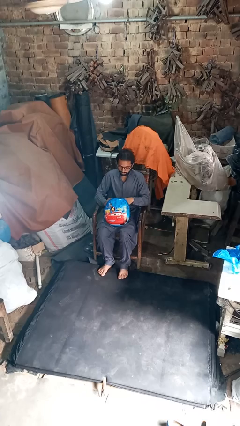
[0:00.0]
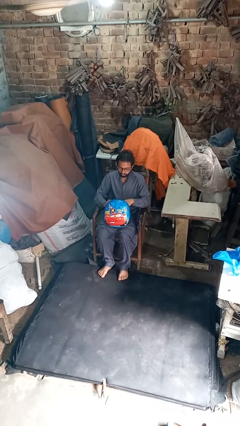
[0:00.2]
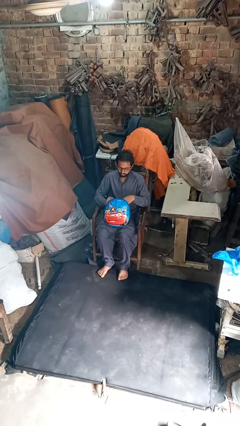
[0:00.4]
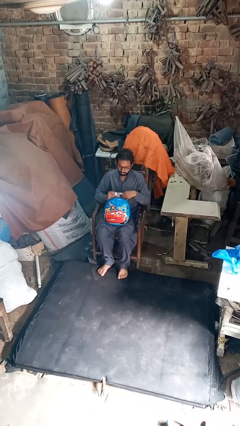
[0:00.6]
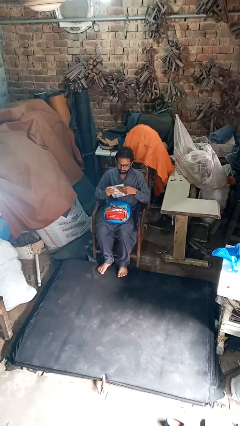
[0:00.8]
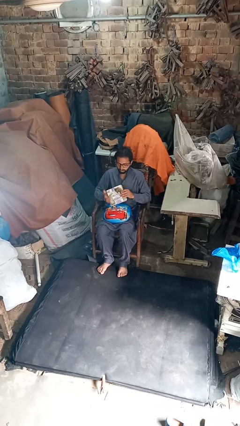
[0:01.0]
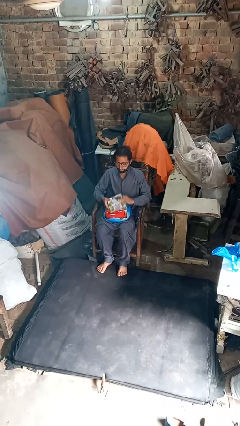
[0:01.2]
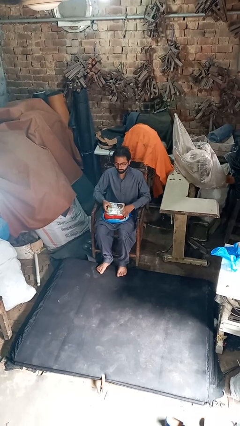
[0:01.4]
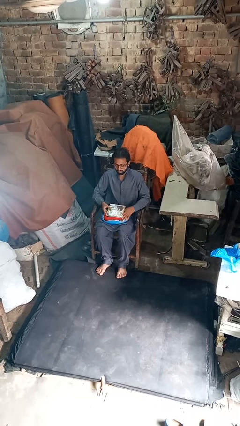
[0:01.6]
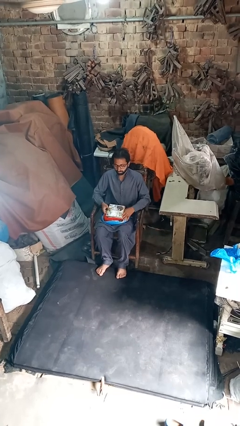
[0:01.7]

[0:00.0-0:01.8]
person takes object from purse

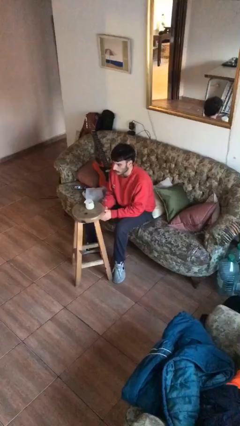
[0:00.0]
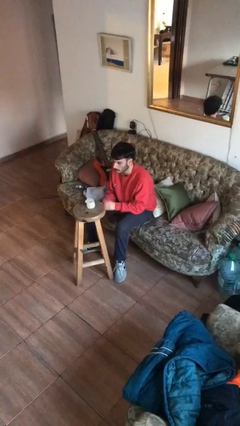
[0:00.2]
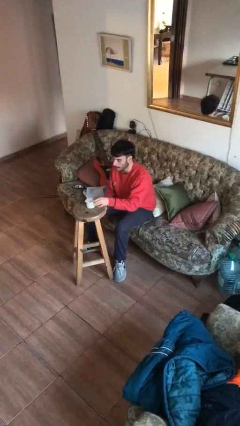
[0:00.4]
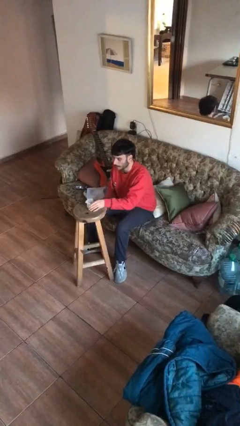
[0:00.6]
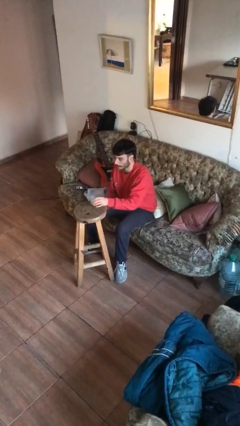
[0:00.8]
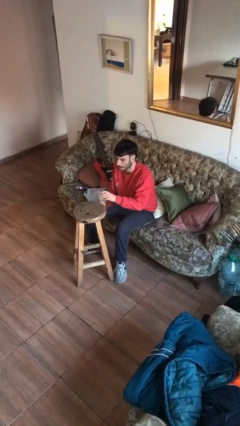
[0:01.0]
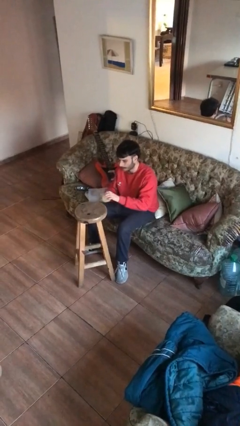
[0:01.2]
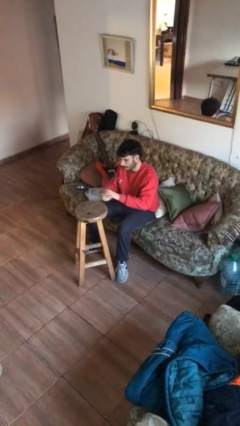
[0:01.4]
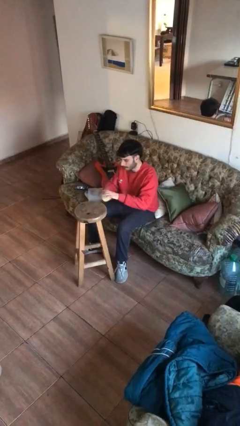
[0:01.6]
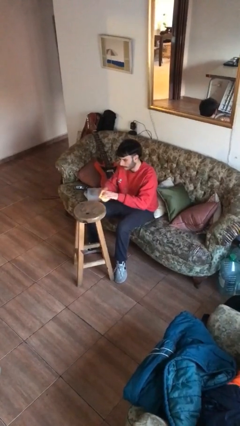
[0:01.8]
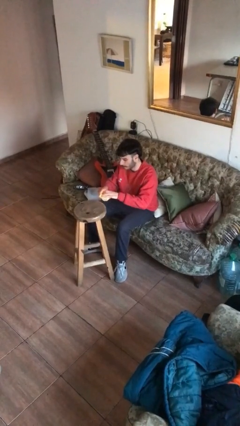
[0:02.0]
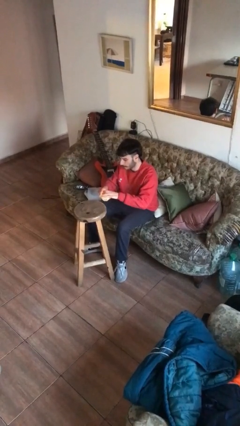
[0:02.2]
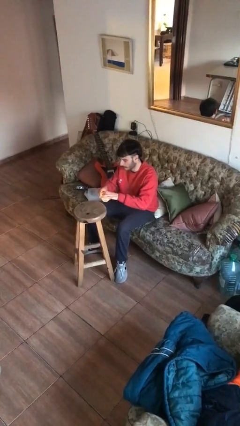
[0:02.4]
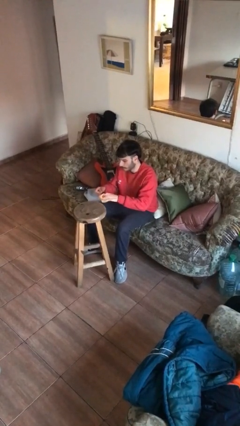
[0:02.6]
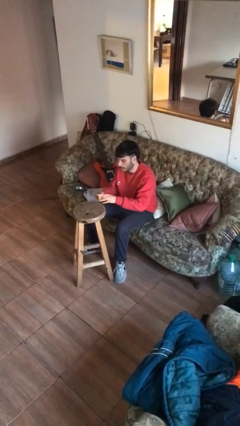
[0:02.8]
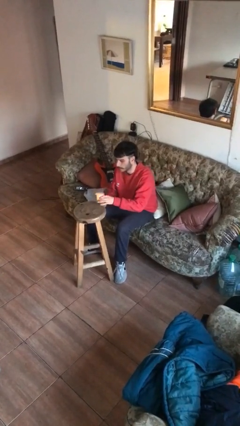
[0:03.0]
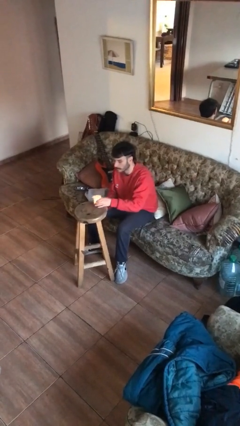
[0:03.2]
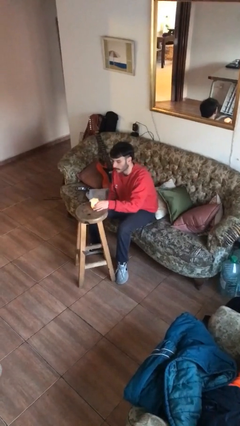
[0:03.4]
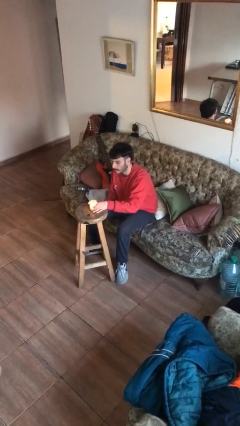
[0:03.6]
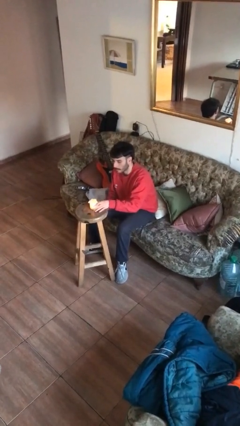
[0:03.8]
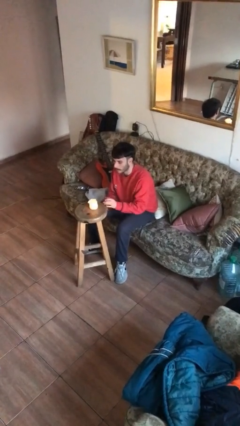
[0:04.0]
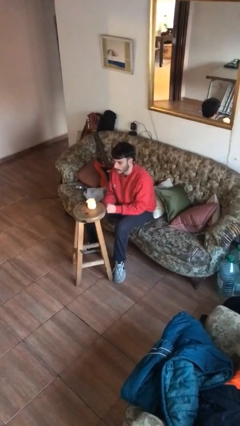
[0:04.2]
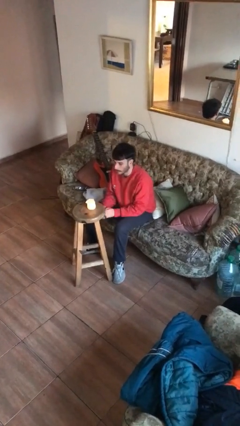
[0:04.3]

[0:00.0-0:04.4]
person lights candle

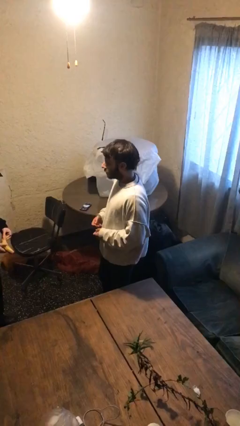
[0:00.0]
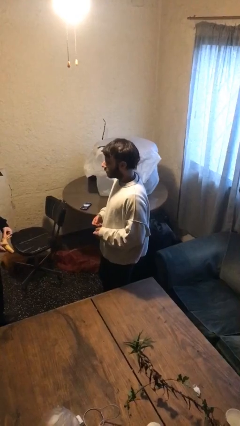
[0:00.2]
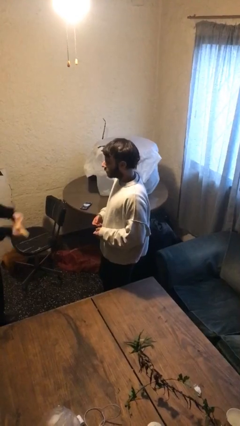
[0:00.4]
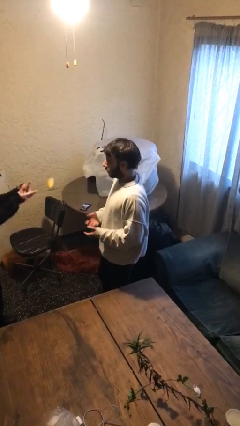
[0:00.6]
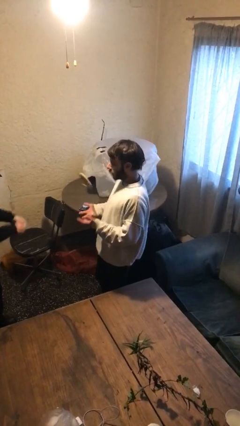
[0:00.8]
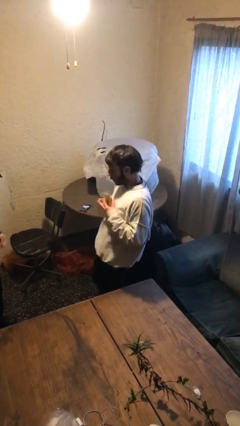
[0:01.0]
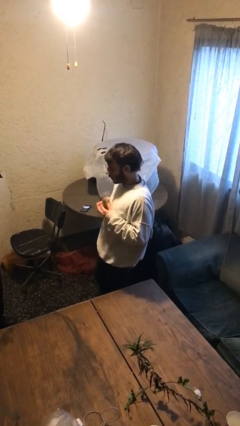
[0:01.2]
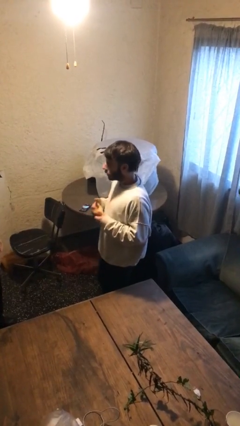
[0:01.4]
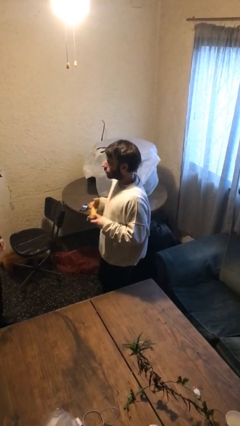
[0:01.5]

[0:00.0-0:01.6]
person catches object from person

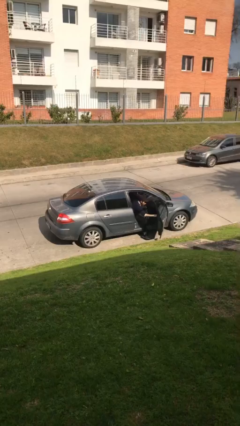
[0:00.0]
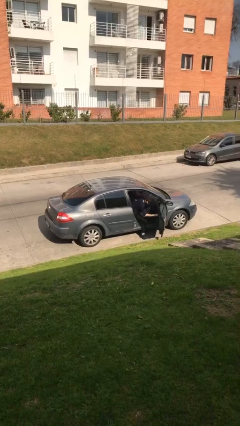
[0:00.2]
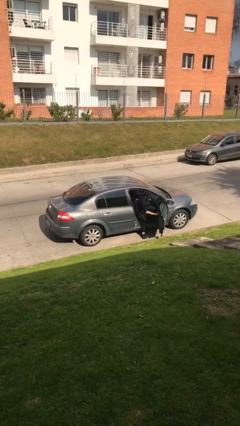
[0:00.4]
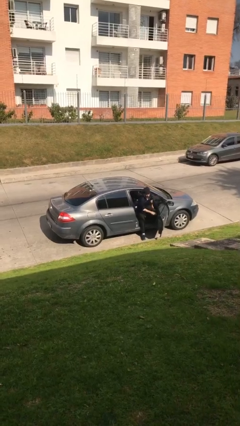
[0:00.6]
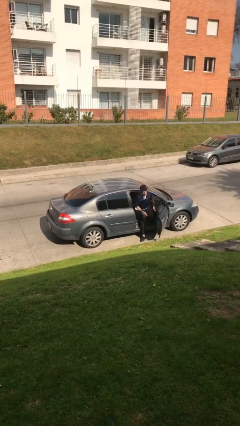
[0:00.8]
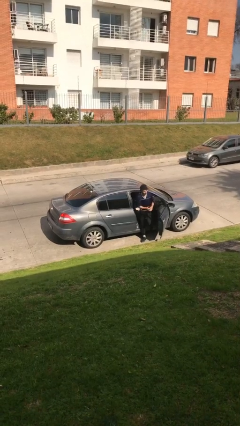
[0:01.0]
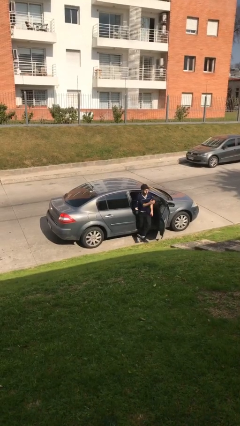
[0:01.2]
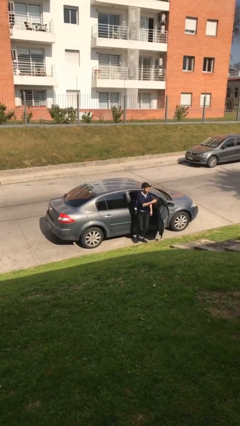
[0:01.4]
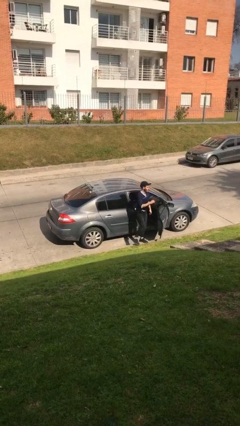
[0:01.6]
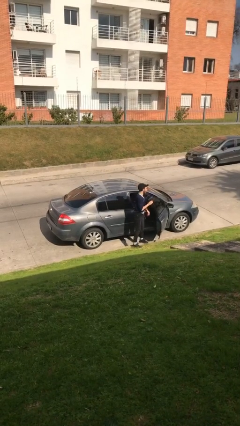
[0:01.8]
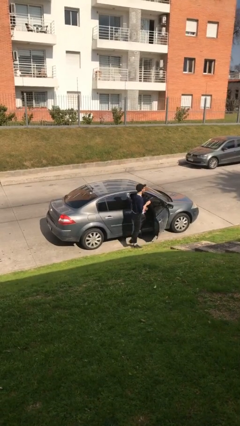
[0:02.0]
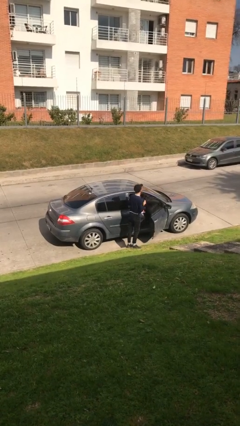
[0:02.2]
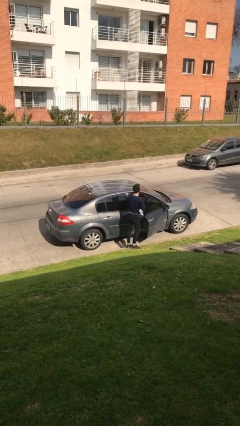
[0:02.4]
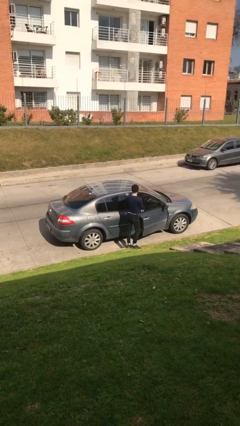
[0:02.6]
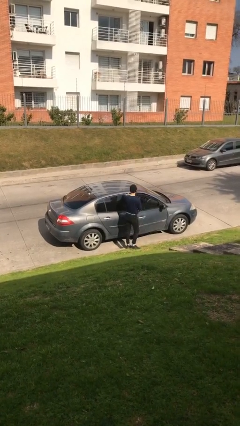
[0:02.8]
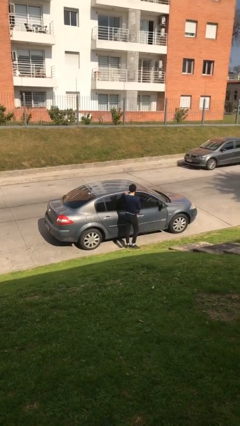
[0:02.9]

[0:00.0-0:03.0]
car drops off person

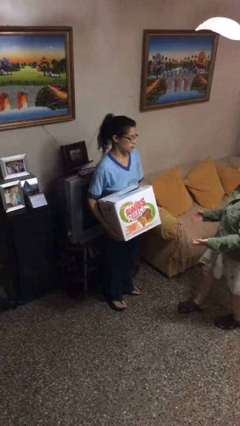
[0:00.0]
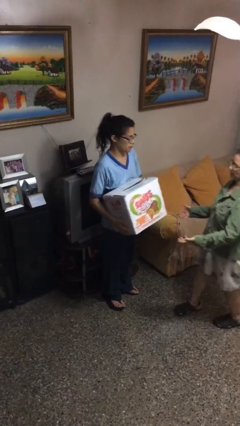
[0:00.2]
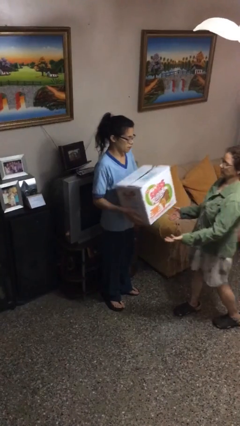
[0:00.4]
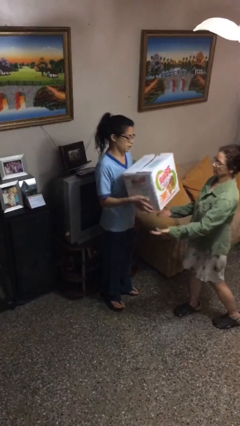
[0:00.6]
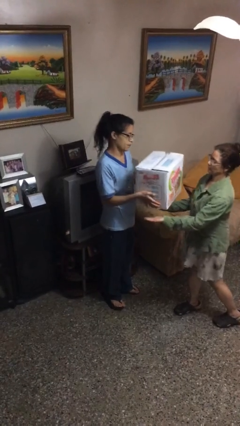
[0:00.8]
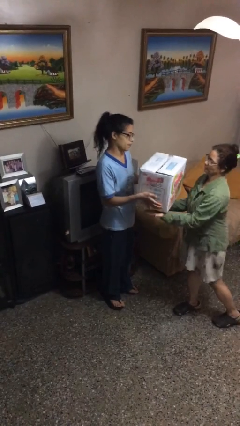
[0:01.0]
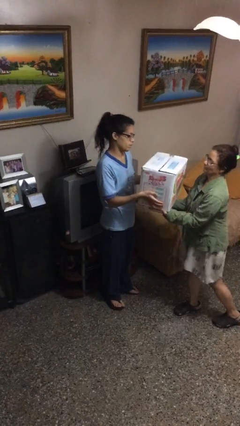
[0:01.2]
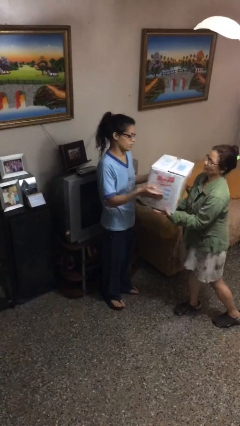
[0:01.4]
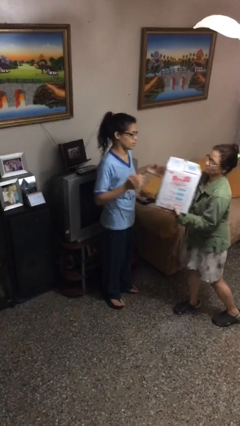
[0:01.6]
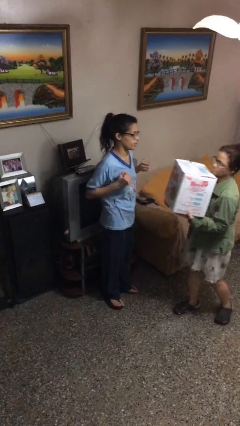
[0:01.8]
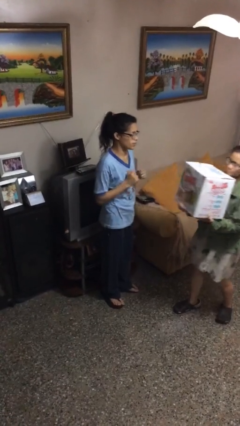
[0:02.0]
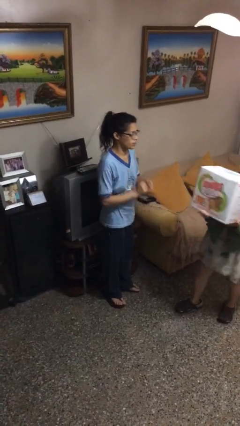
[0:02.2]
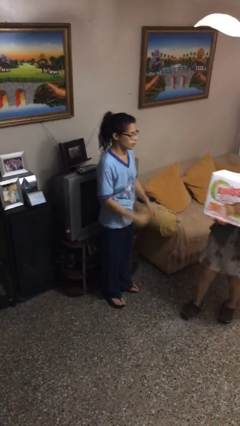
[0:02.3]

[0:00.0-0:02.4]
person transfers object to person

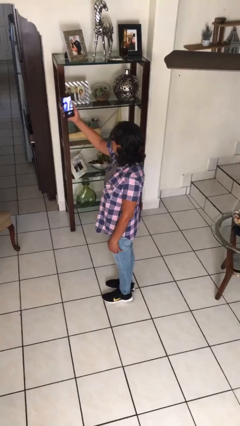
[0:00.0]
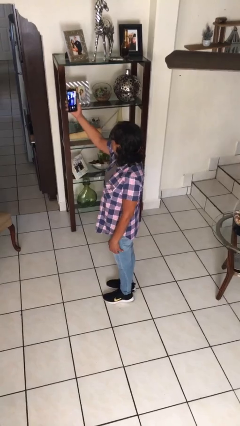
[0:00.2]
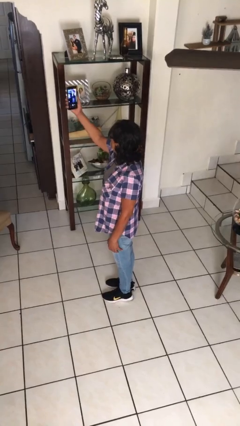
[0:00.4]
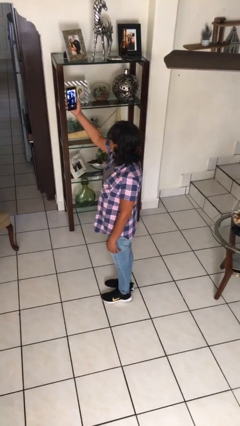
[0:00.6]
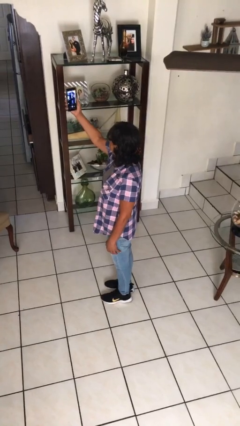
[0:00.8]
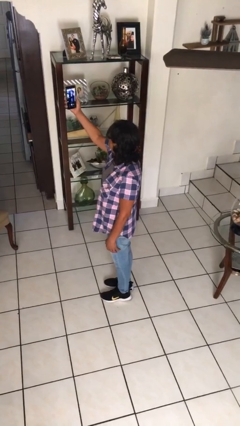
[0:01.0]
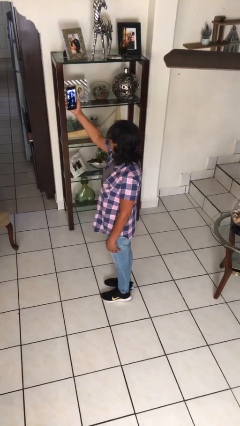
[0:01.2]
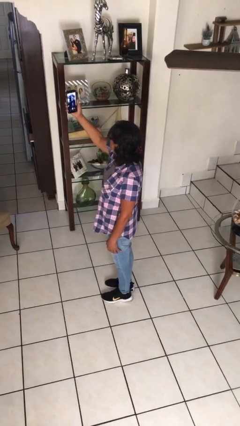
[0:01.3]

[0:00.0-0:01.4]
person takes selfie

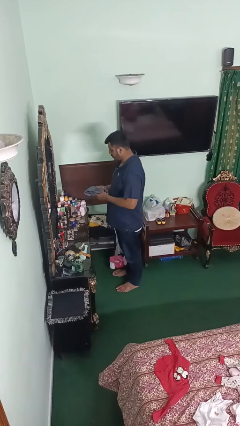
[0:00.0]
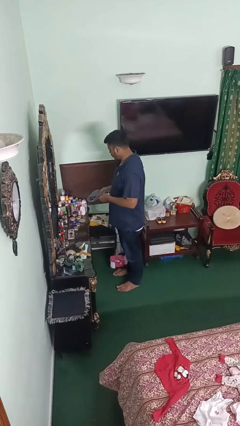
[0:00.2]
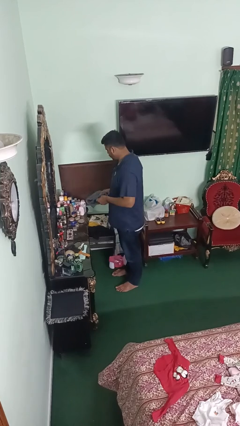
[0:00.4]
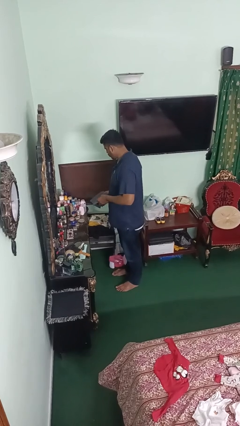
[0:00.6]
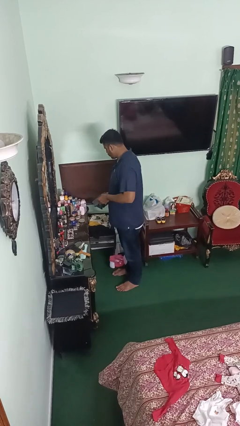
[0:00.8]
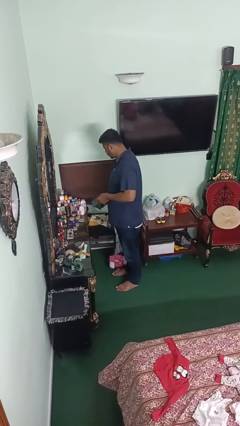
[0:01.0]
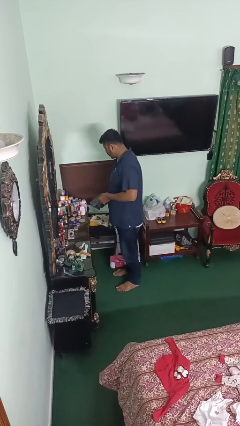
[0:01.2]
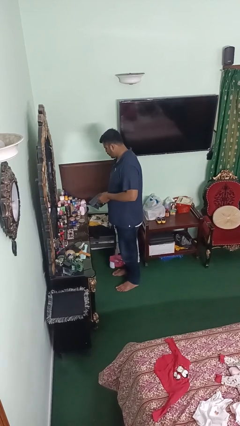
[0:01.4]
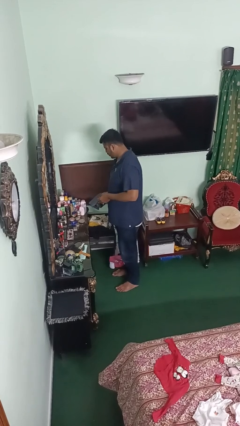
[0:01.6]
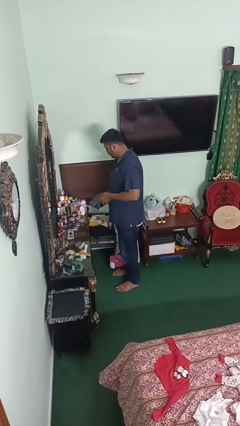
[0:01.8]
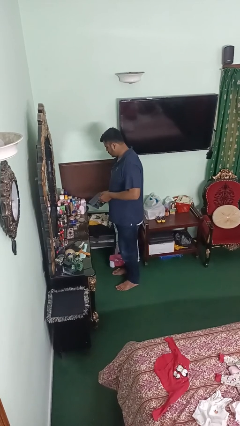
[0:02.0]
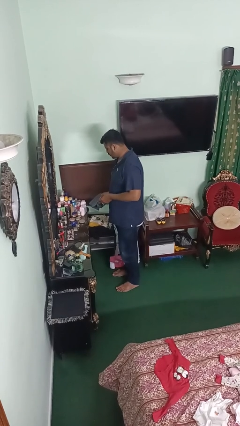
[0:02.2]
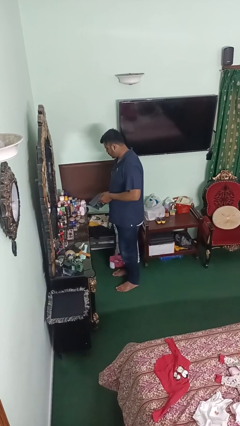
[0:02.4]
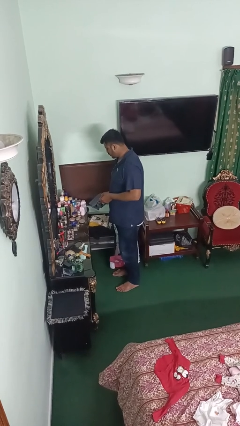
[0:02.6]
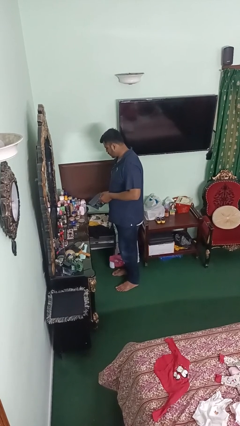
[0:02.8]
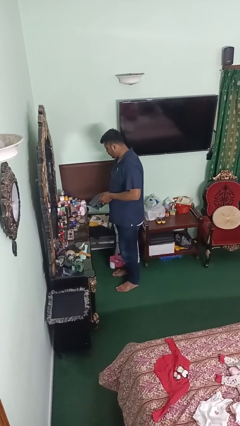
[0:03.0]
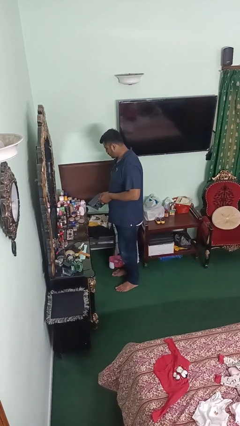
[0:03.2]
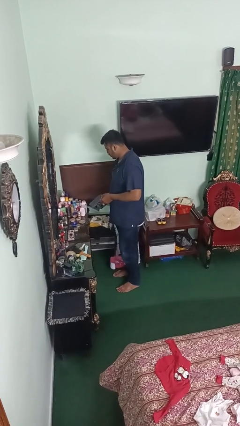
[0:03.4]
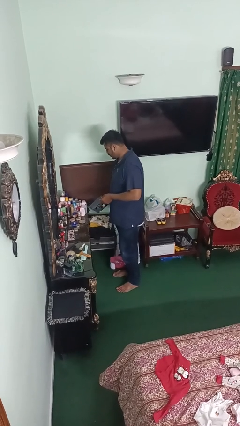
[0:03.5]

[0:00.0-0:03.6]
person takes clothes from dresser
